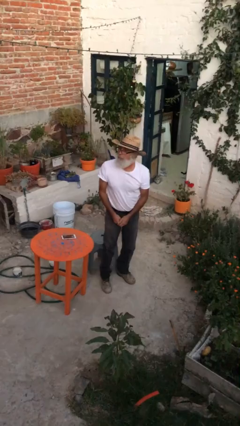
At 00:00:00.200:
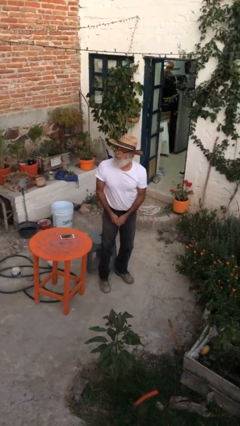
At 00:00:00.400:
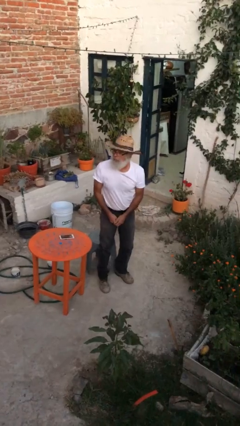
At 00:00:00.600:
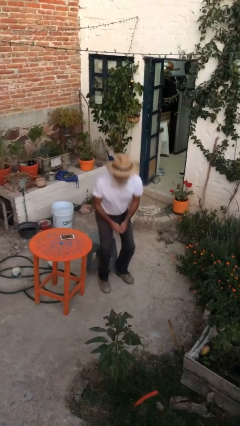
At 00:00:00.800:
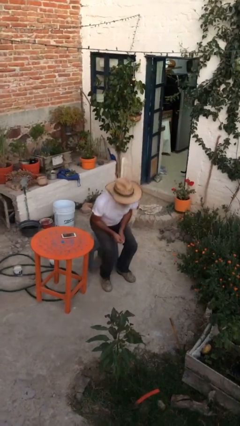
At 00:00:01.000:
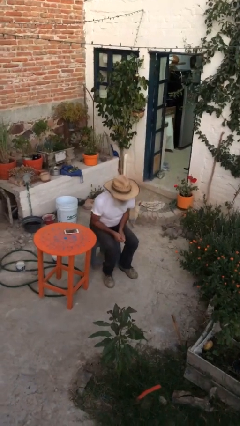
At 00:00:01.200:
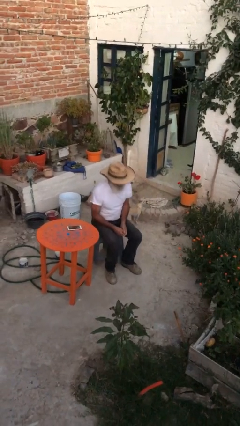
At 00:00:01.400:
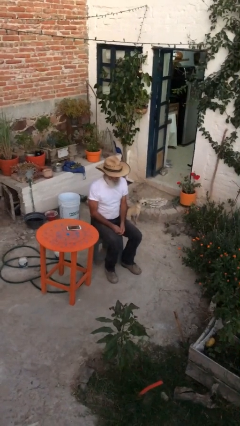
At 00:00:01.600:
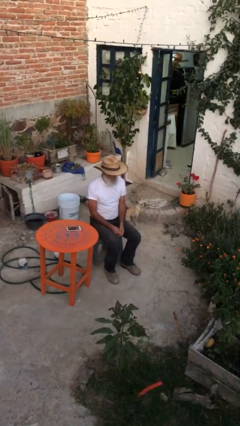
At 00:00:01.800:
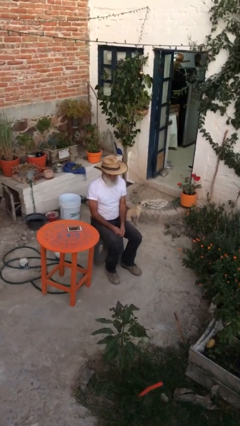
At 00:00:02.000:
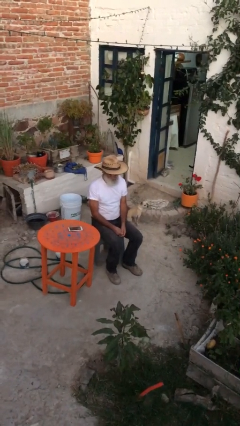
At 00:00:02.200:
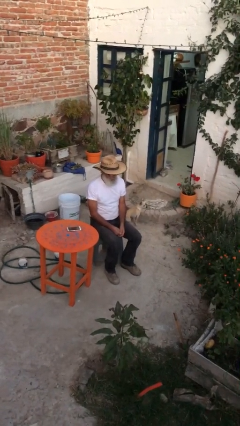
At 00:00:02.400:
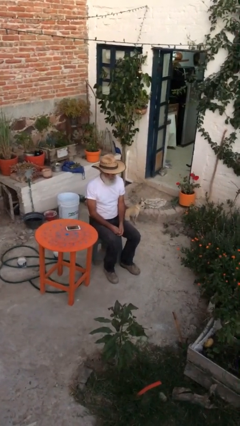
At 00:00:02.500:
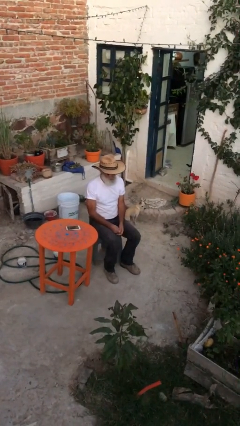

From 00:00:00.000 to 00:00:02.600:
person sits down

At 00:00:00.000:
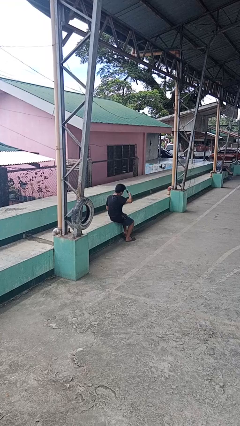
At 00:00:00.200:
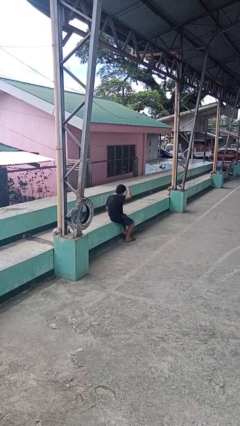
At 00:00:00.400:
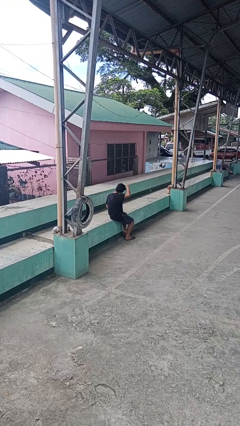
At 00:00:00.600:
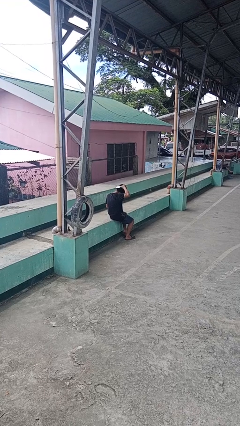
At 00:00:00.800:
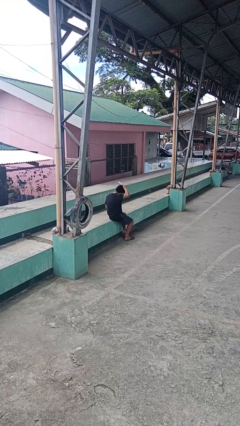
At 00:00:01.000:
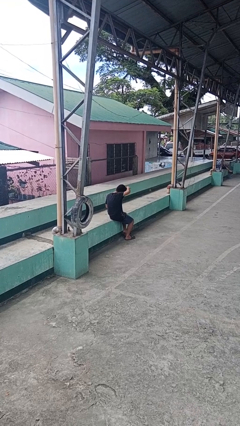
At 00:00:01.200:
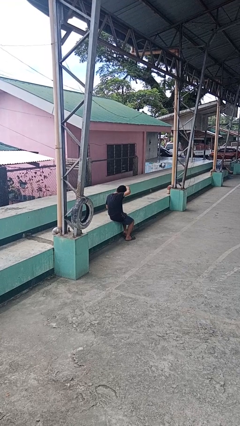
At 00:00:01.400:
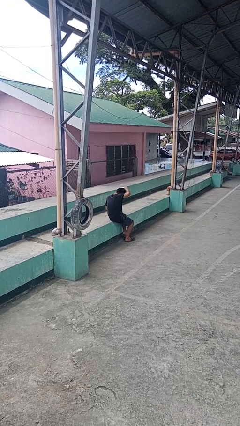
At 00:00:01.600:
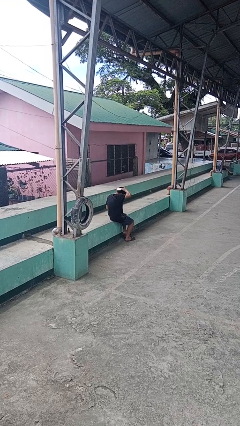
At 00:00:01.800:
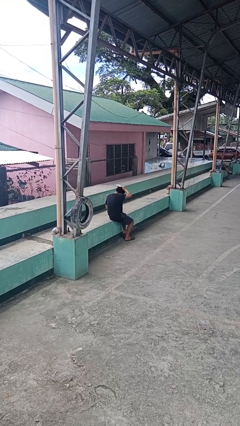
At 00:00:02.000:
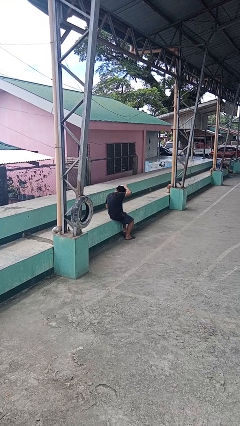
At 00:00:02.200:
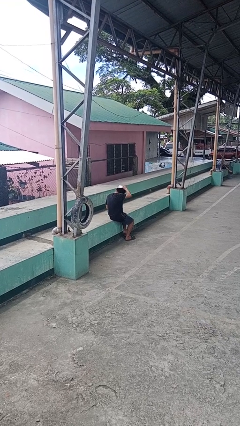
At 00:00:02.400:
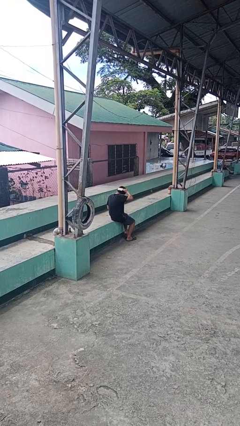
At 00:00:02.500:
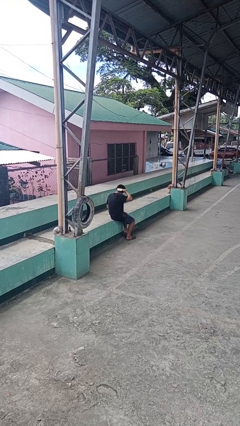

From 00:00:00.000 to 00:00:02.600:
person brushes hair

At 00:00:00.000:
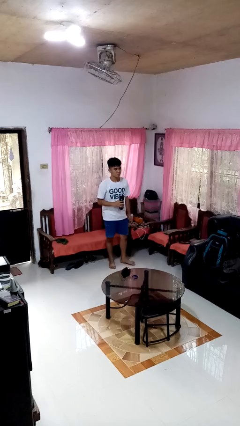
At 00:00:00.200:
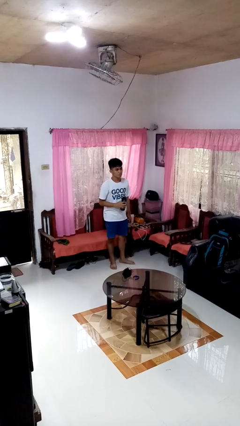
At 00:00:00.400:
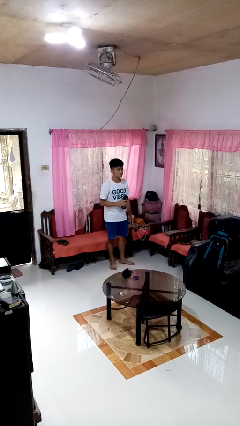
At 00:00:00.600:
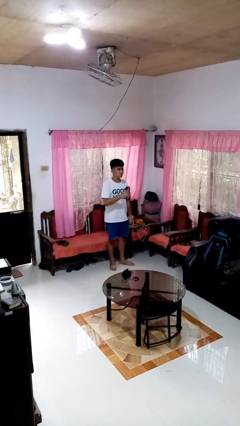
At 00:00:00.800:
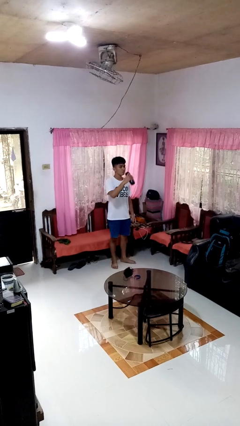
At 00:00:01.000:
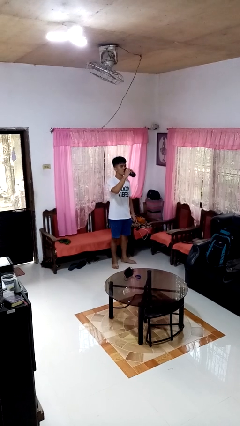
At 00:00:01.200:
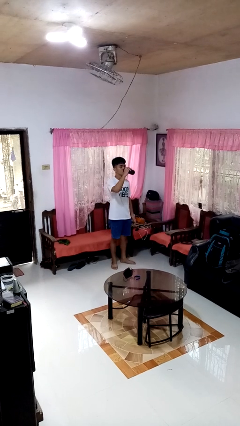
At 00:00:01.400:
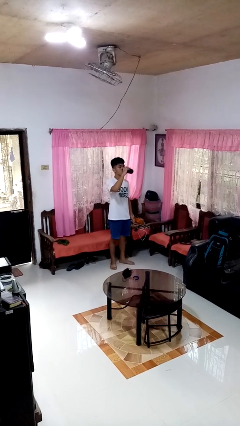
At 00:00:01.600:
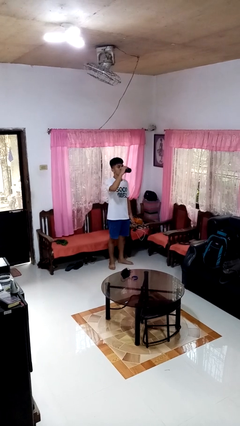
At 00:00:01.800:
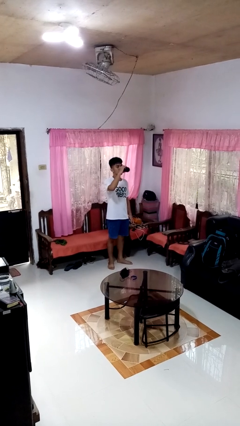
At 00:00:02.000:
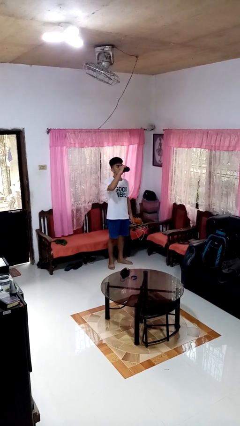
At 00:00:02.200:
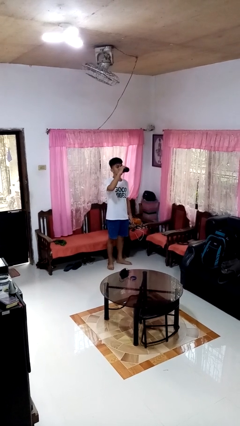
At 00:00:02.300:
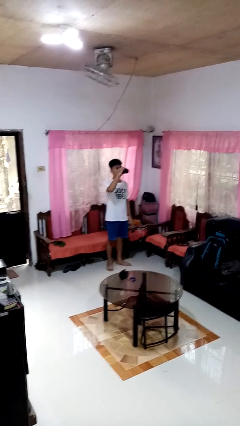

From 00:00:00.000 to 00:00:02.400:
person drinks from bottle

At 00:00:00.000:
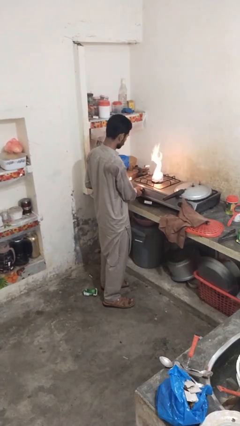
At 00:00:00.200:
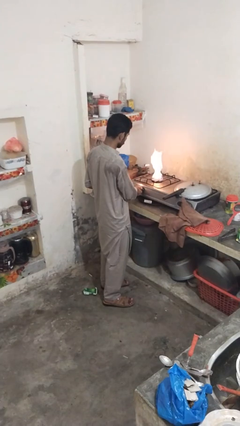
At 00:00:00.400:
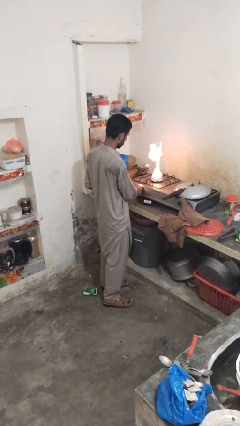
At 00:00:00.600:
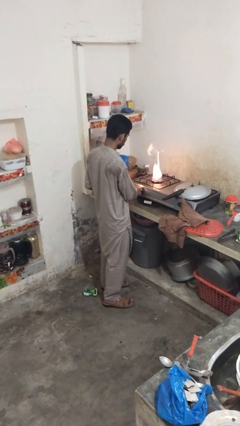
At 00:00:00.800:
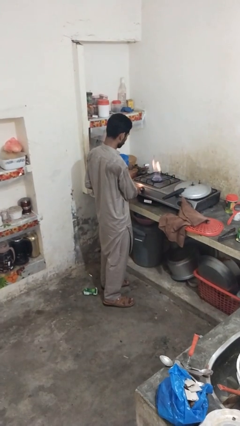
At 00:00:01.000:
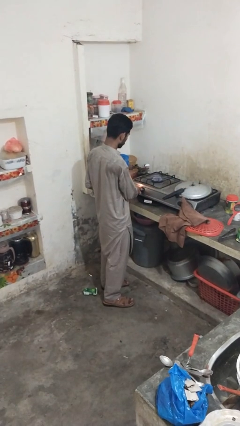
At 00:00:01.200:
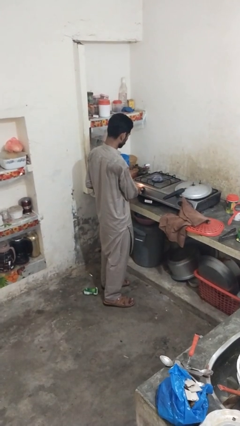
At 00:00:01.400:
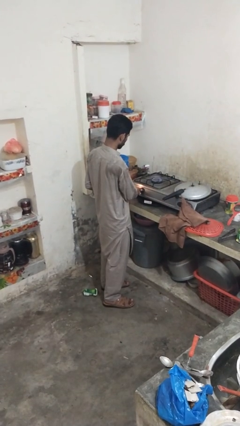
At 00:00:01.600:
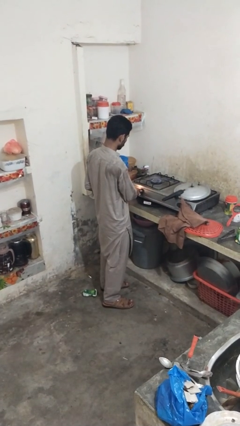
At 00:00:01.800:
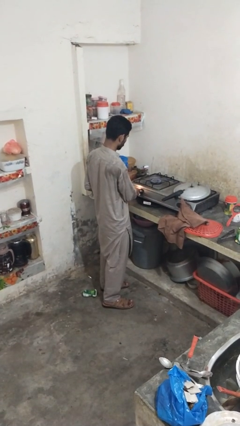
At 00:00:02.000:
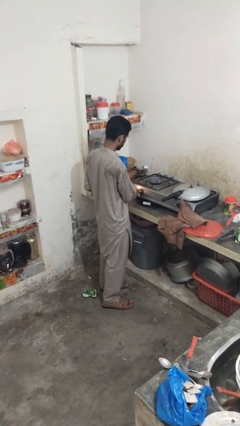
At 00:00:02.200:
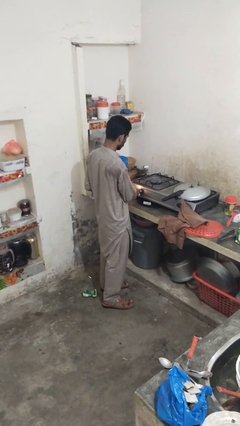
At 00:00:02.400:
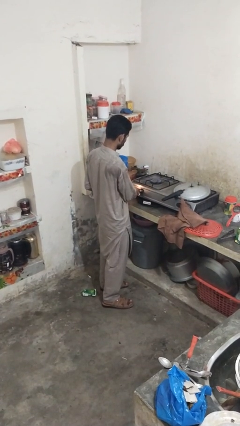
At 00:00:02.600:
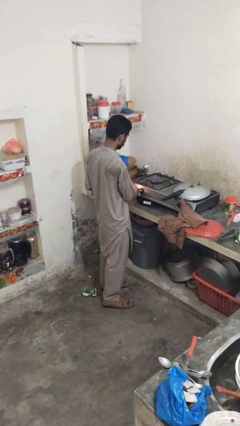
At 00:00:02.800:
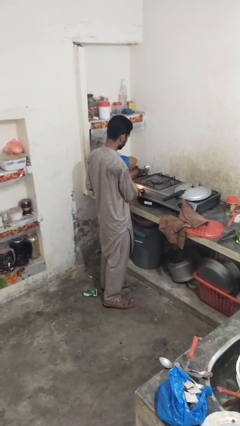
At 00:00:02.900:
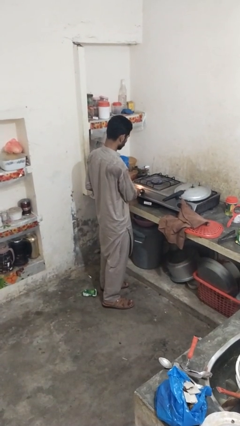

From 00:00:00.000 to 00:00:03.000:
person turns off stovetop

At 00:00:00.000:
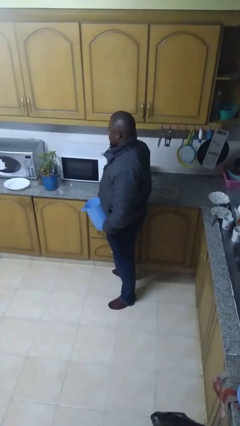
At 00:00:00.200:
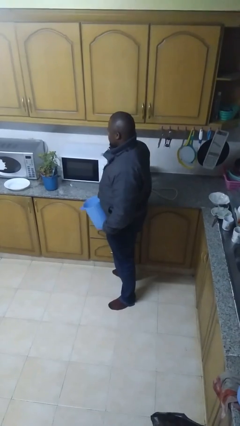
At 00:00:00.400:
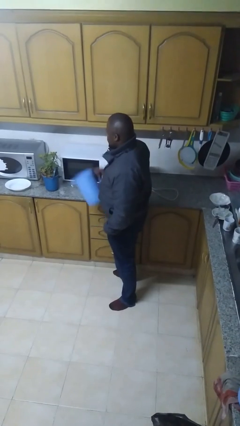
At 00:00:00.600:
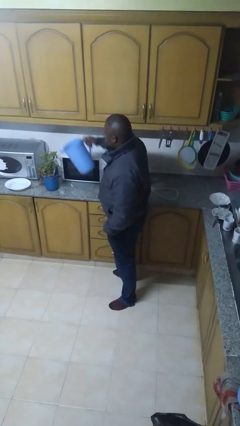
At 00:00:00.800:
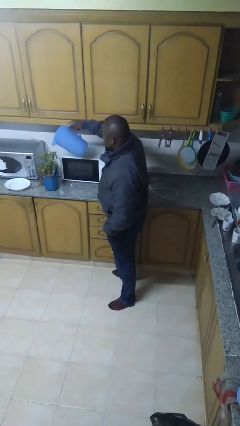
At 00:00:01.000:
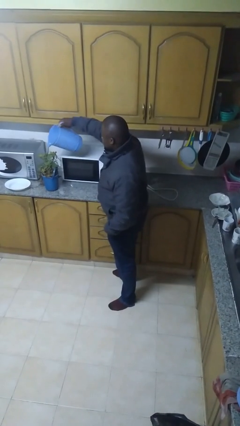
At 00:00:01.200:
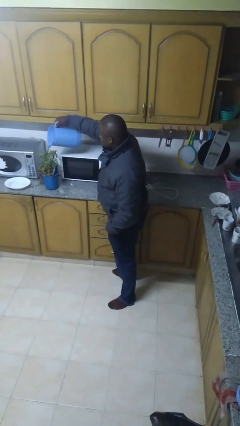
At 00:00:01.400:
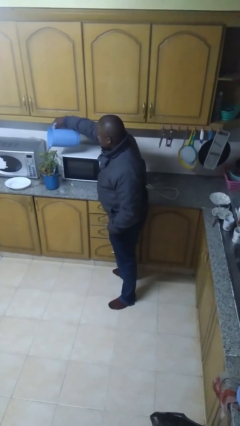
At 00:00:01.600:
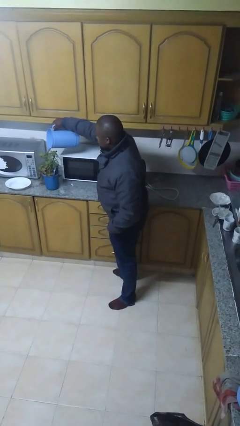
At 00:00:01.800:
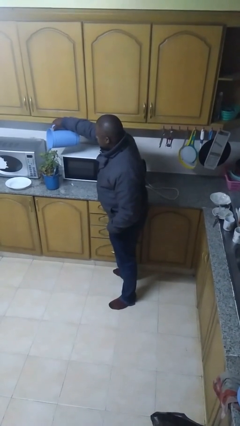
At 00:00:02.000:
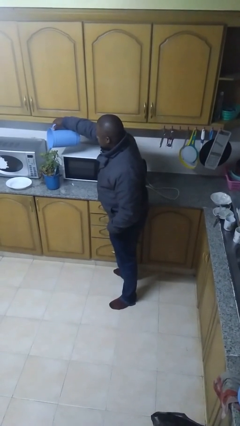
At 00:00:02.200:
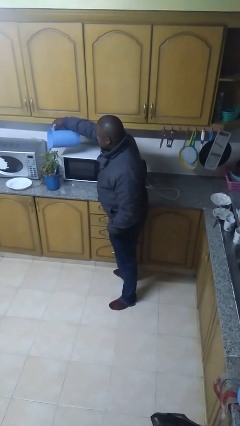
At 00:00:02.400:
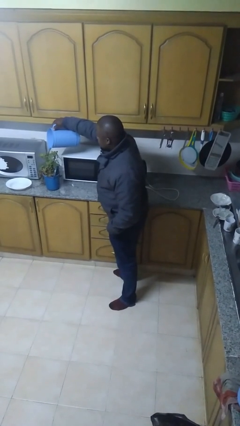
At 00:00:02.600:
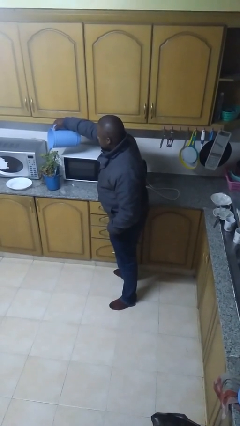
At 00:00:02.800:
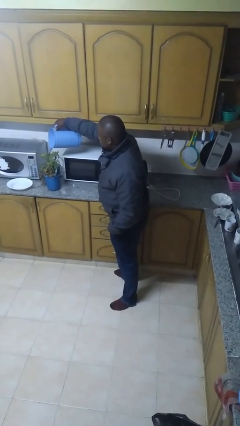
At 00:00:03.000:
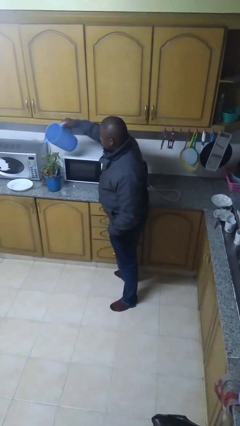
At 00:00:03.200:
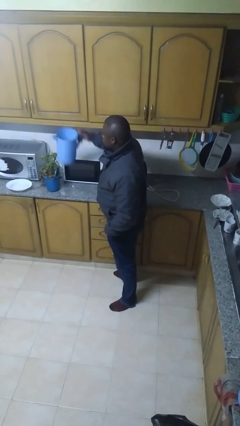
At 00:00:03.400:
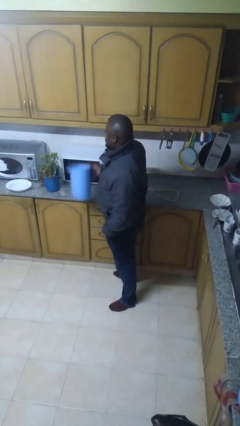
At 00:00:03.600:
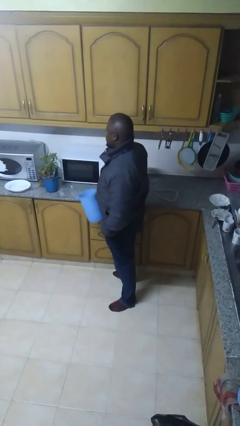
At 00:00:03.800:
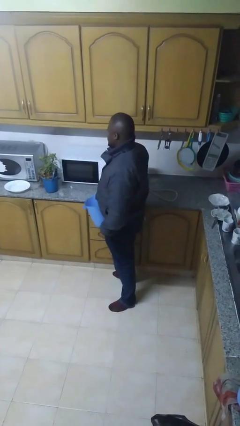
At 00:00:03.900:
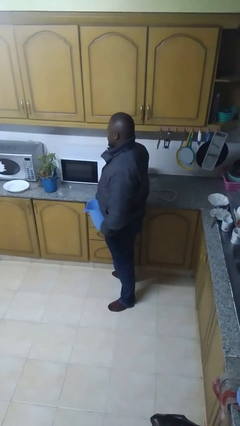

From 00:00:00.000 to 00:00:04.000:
person waters houseplant

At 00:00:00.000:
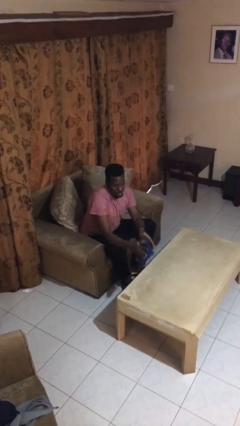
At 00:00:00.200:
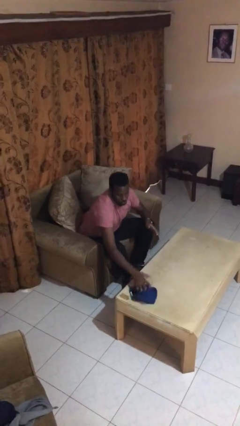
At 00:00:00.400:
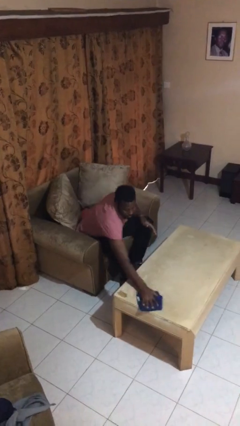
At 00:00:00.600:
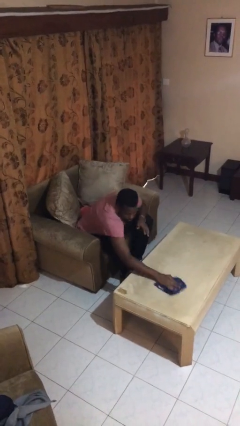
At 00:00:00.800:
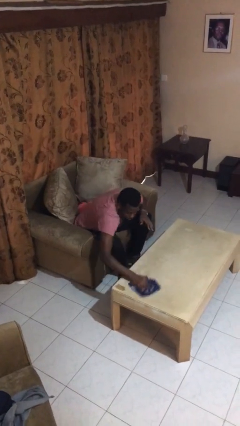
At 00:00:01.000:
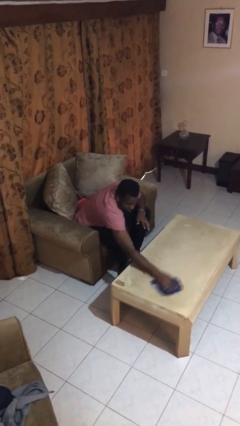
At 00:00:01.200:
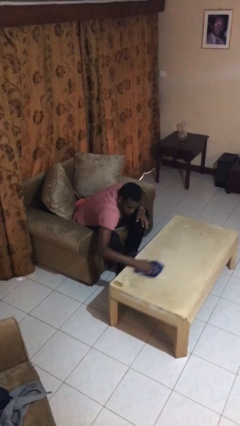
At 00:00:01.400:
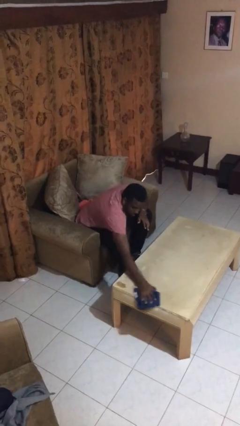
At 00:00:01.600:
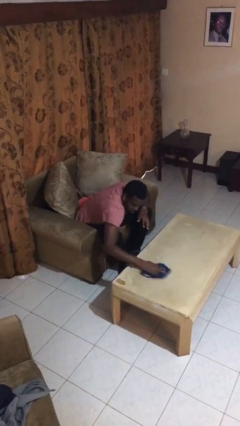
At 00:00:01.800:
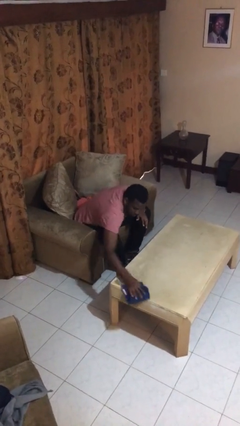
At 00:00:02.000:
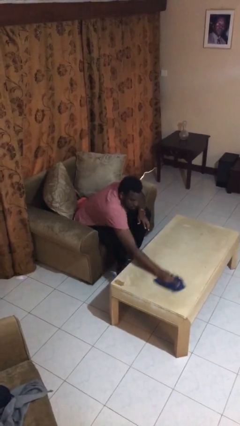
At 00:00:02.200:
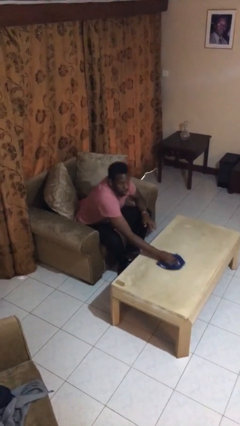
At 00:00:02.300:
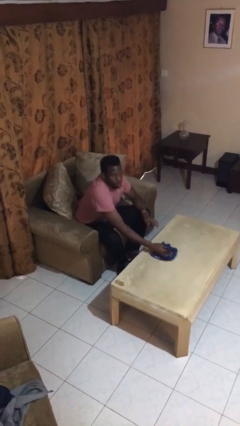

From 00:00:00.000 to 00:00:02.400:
person cleans table with rag
